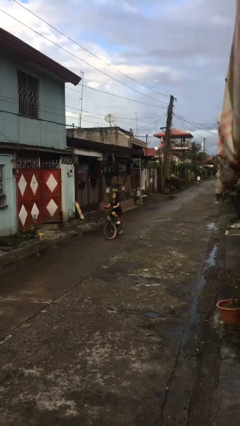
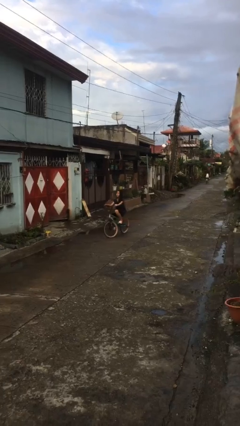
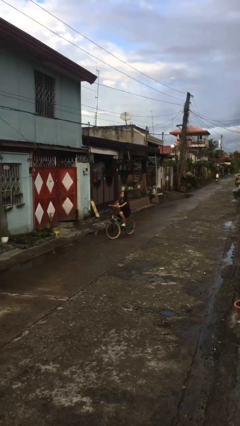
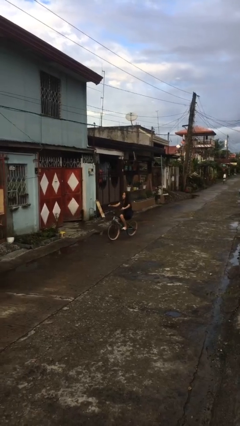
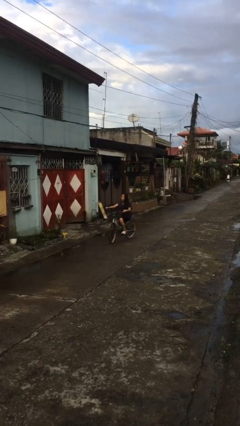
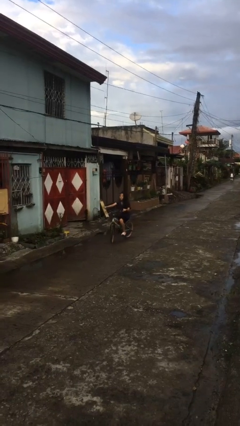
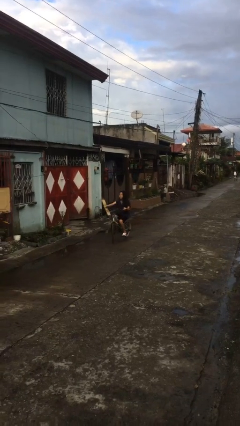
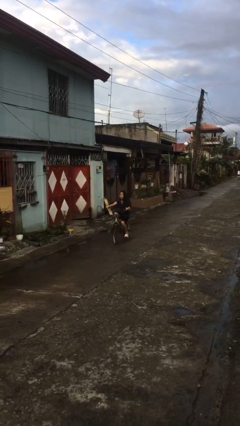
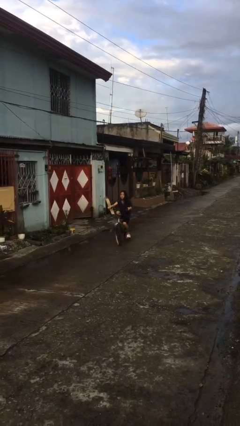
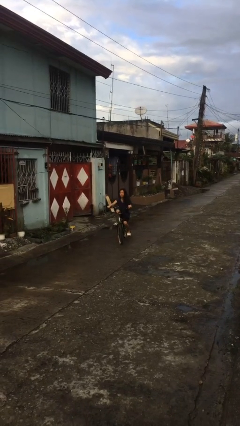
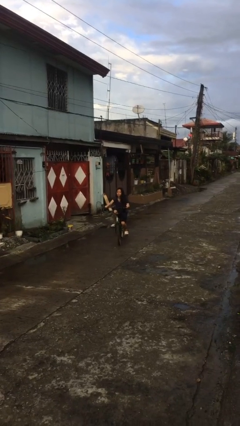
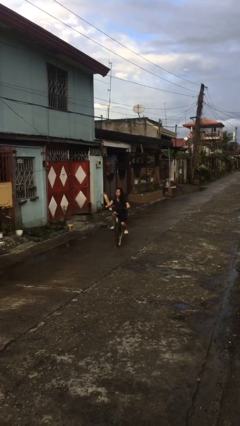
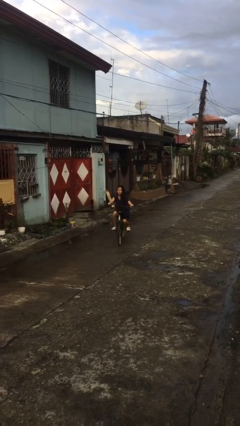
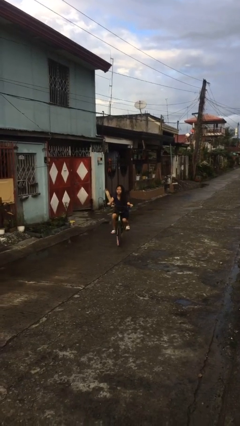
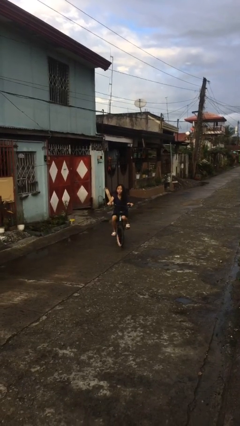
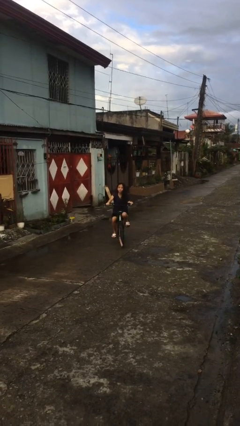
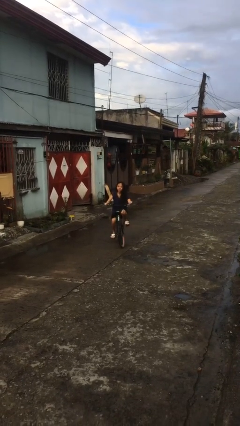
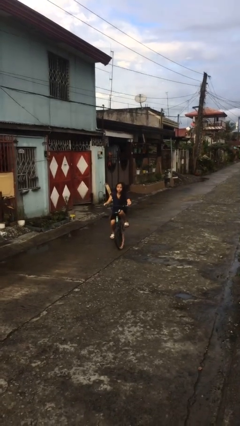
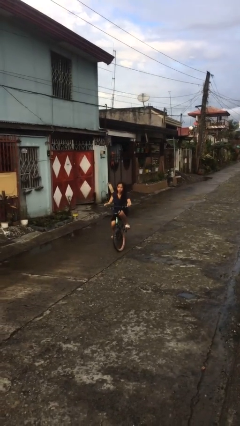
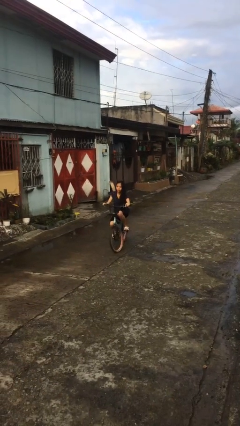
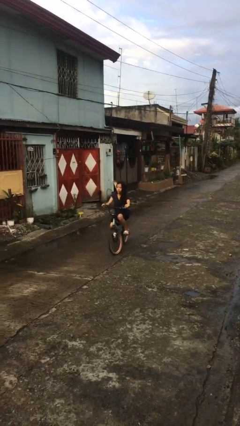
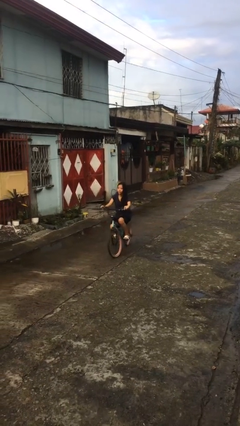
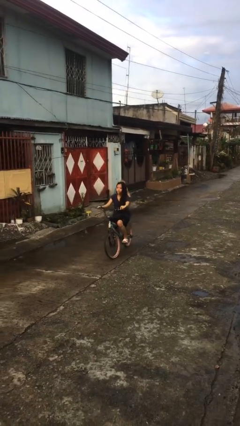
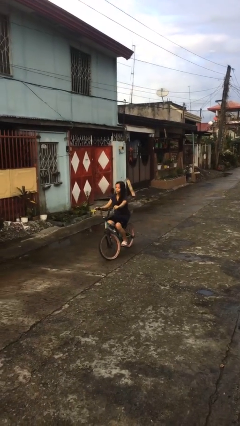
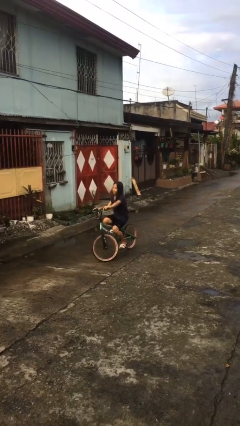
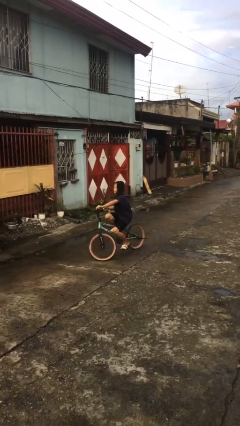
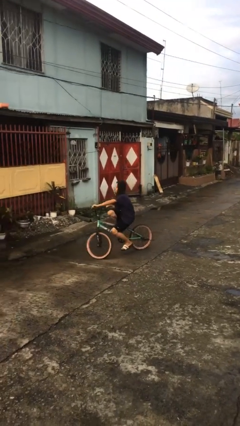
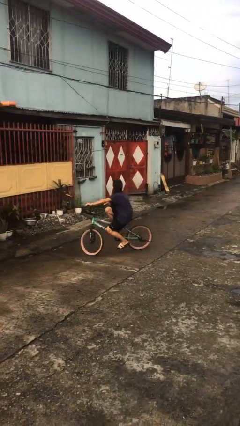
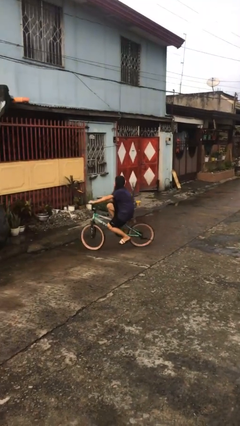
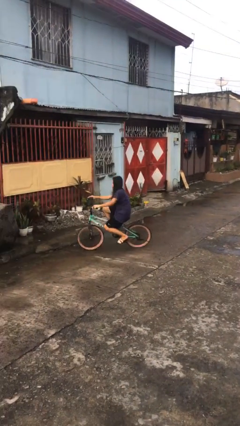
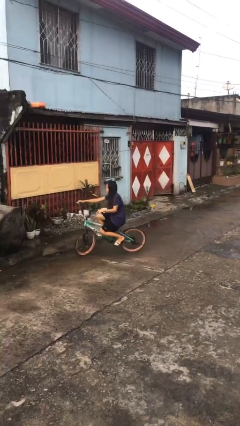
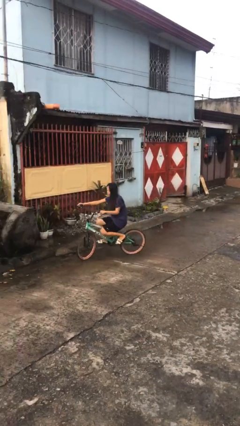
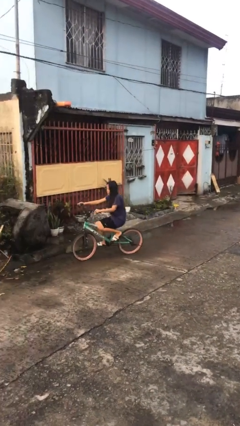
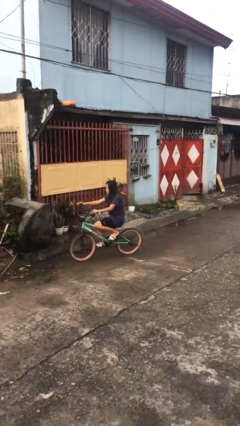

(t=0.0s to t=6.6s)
person rides bicycle

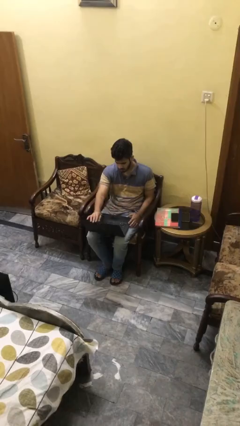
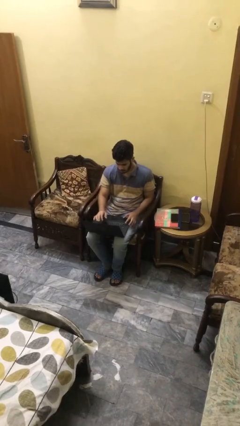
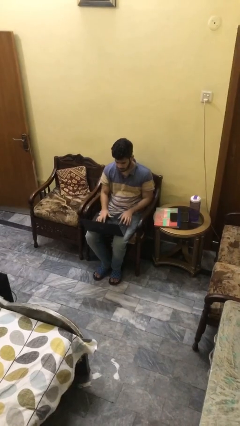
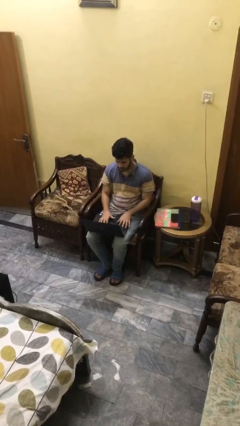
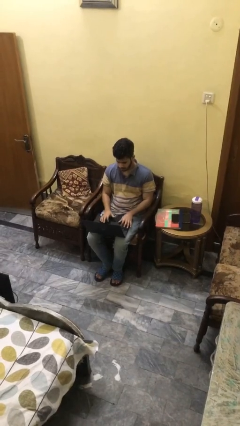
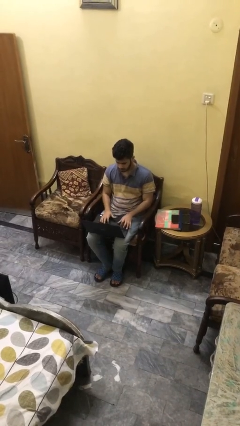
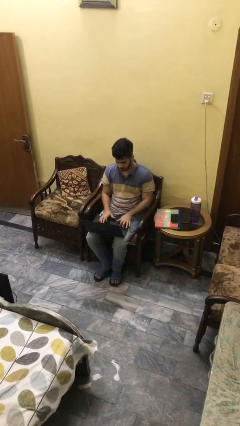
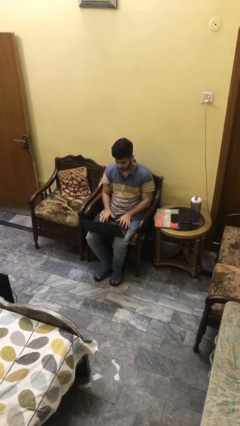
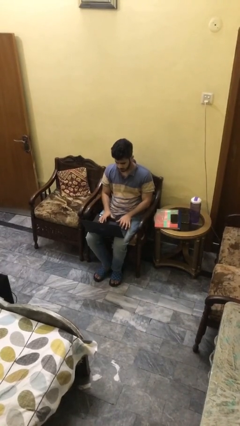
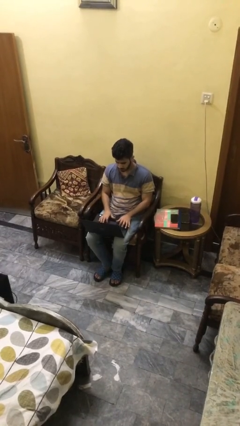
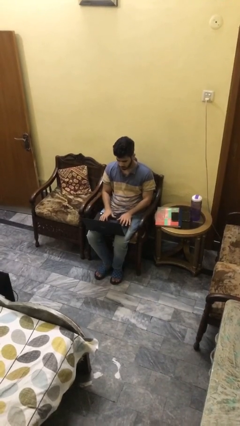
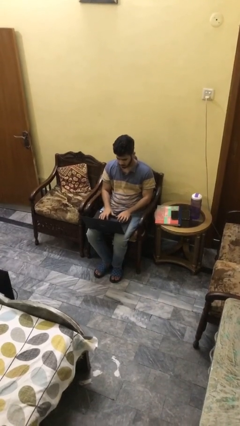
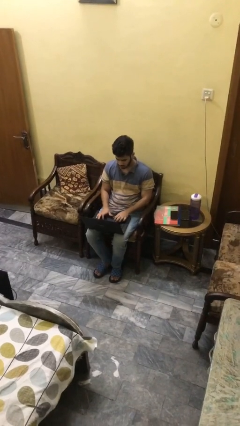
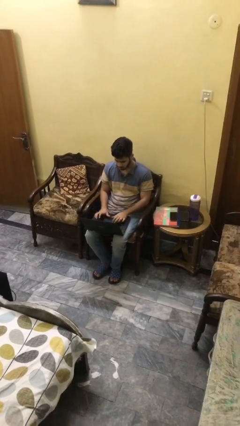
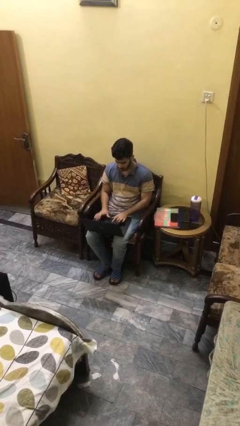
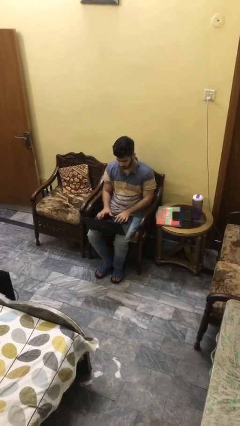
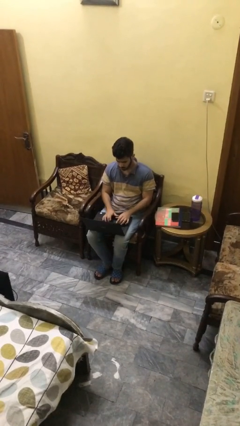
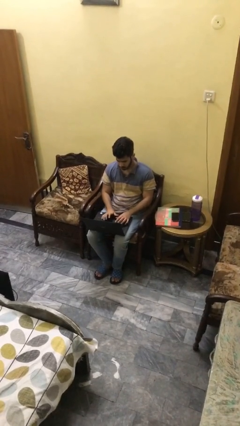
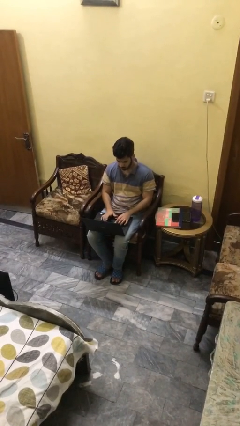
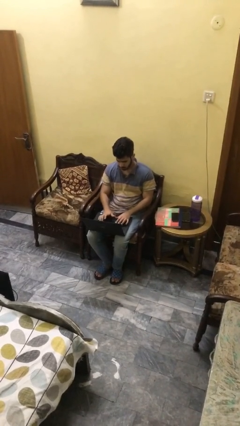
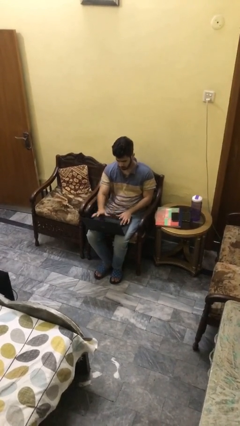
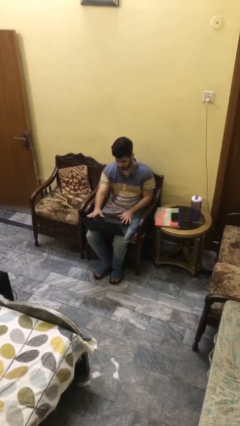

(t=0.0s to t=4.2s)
person interacts with laptop

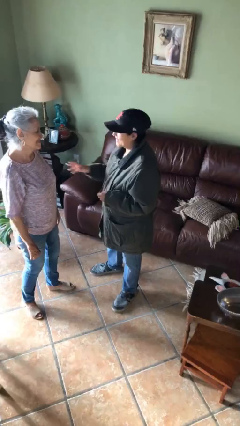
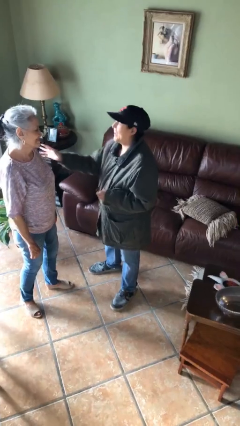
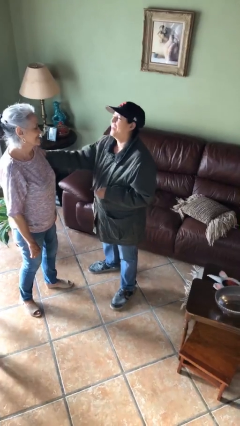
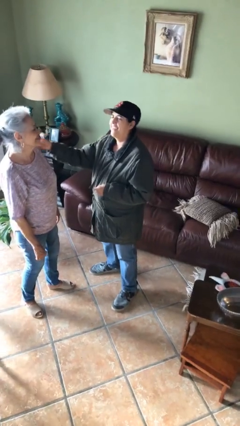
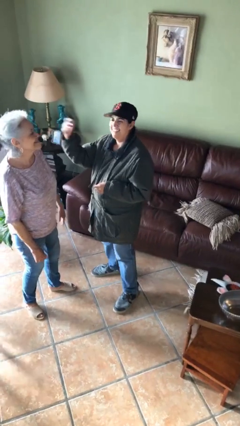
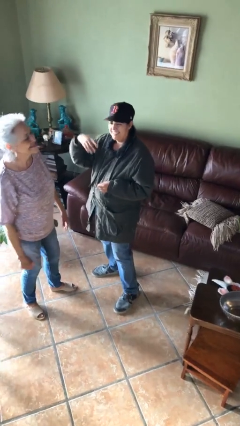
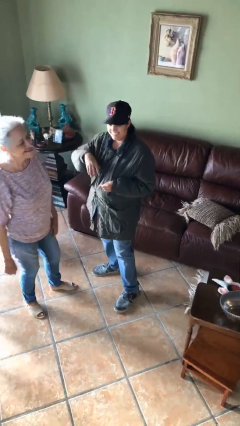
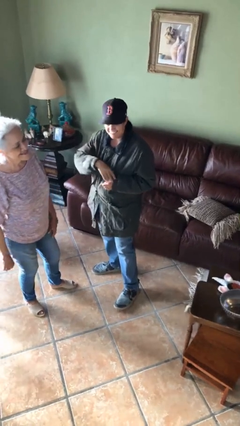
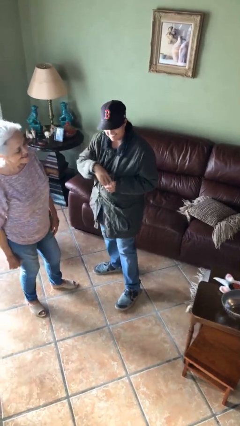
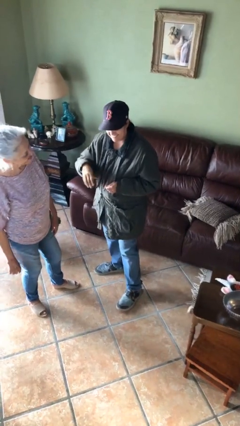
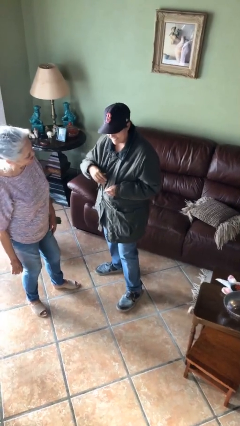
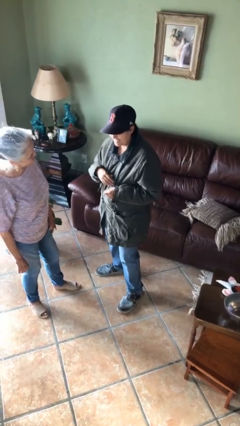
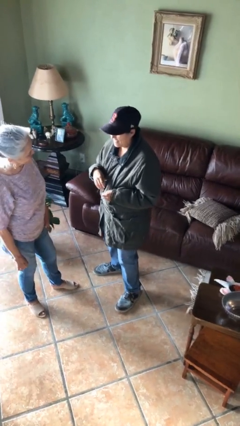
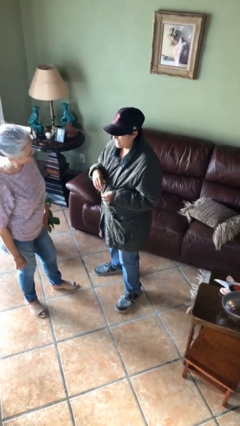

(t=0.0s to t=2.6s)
person shoves person

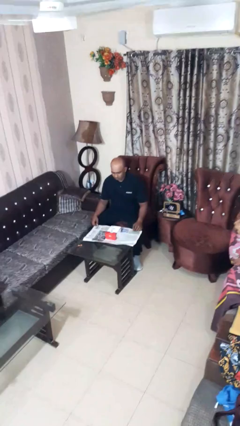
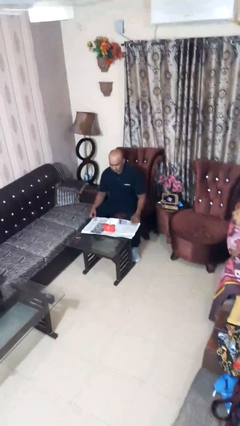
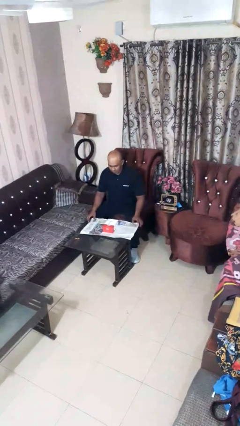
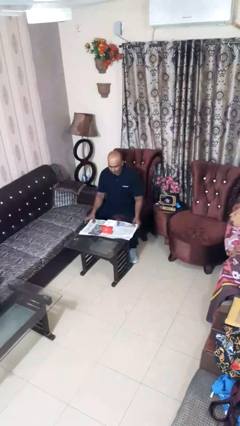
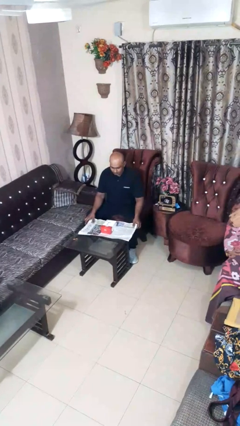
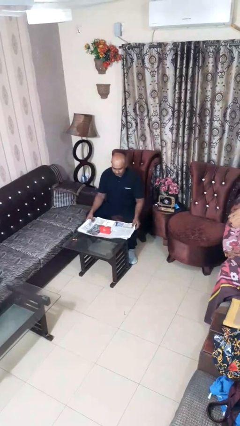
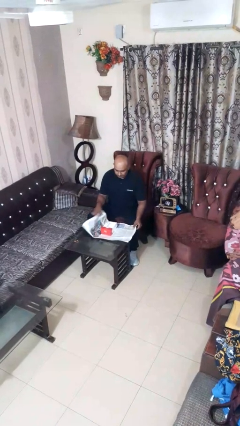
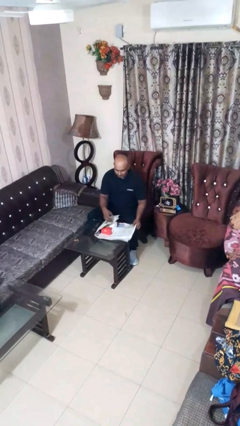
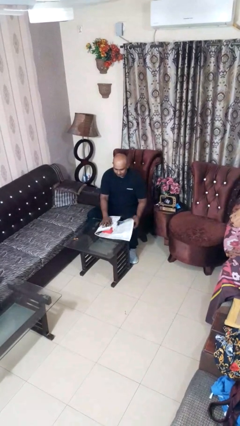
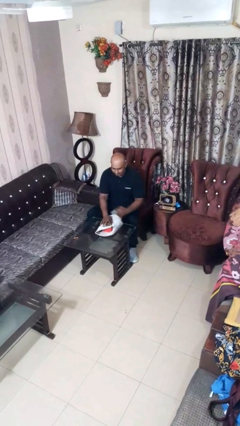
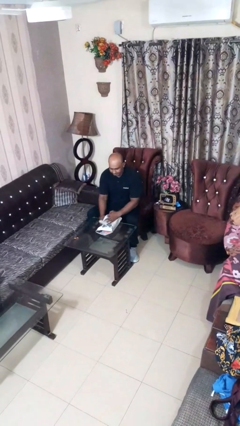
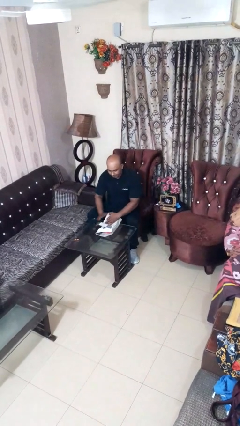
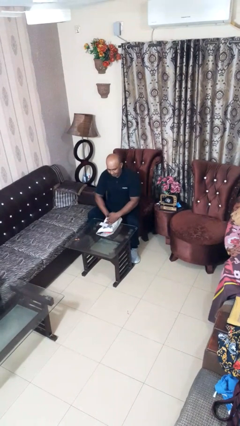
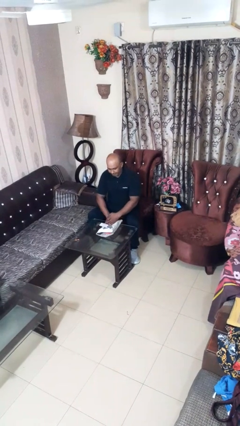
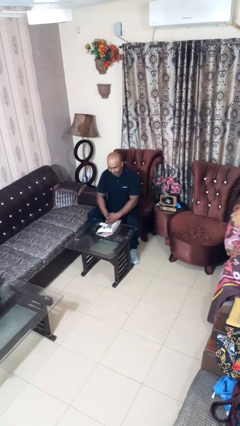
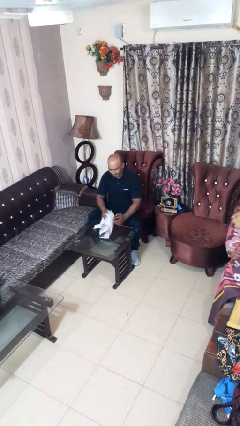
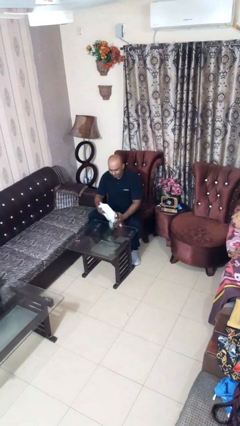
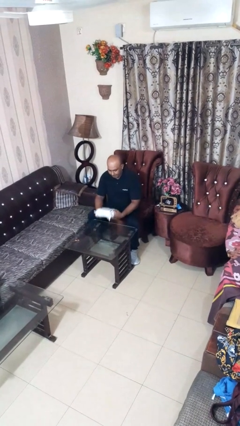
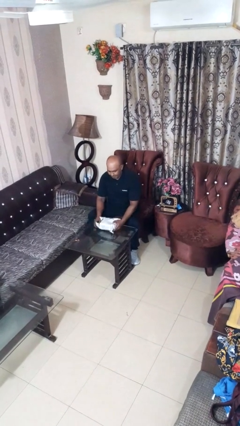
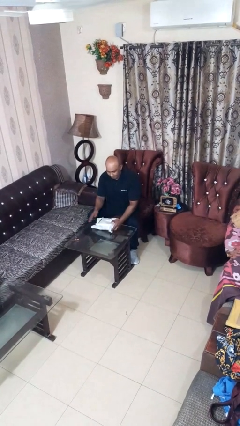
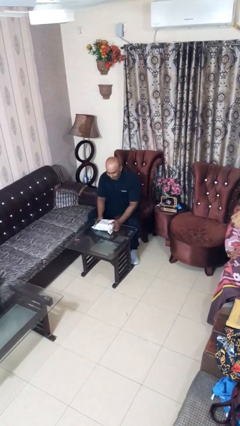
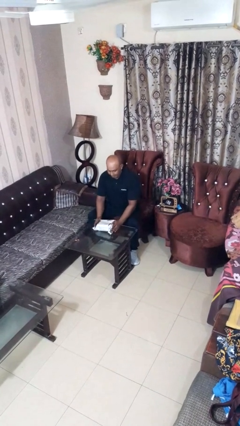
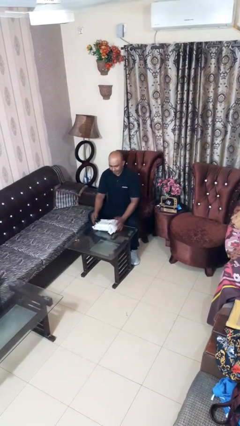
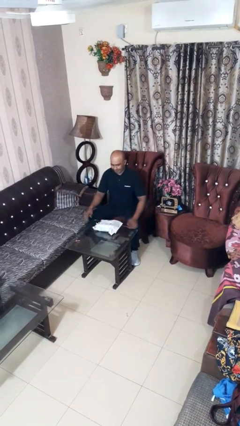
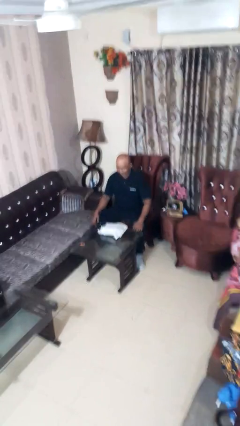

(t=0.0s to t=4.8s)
person wraps box
